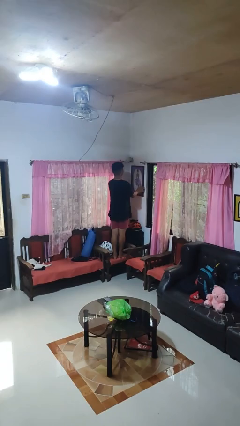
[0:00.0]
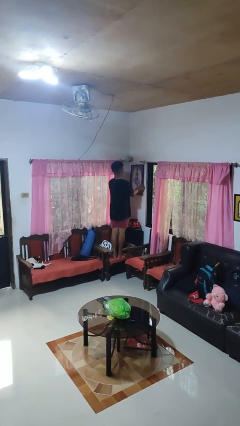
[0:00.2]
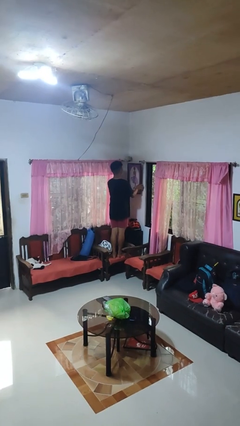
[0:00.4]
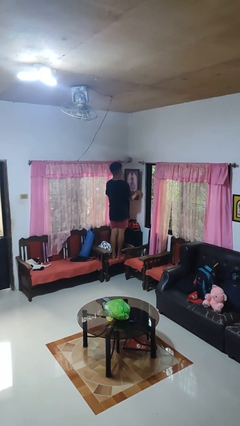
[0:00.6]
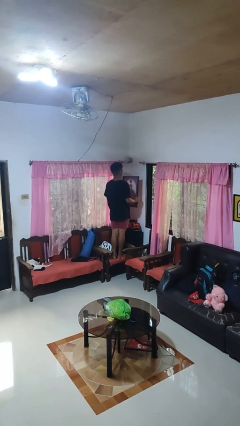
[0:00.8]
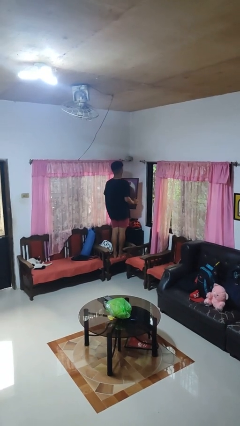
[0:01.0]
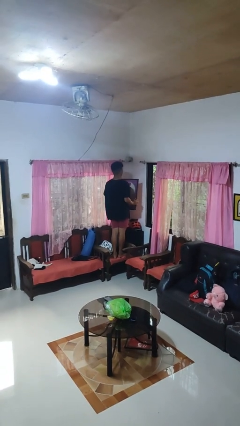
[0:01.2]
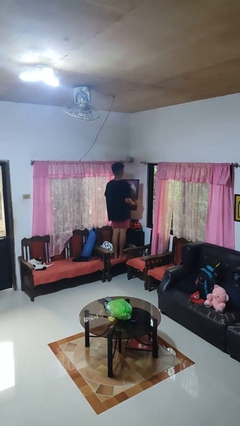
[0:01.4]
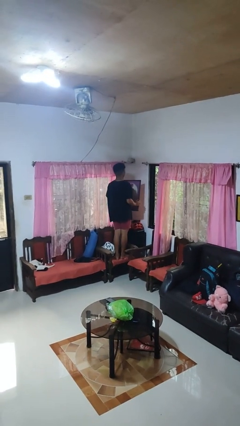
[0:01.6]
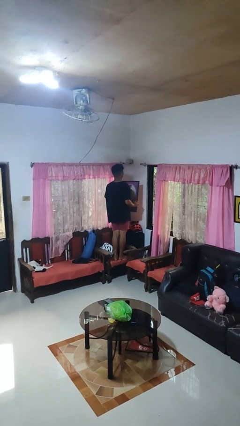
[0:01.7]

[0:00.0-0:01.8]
person takes down picture frame

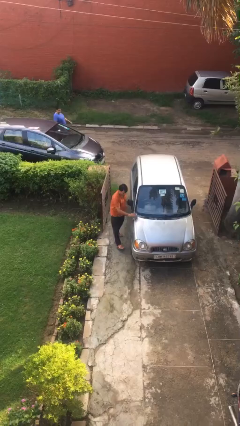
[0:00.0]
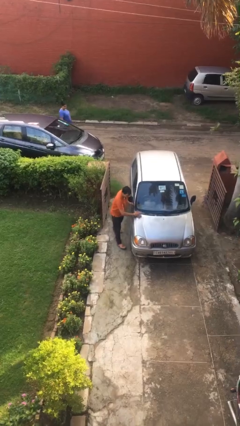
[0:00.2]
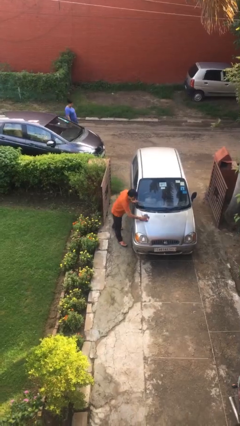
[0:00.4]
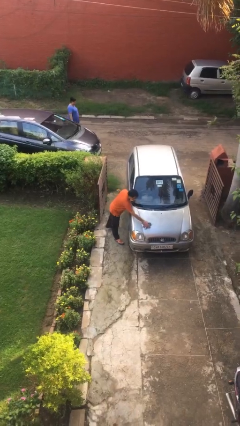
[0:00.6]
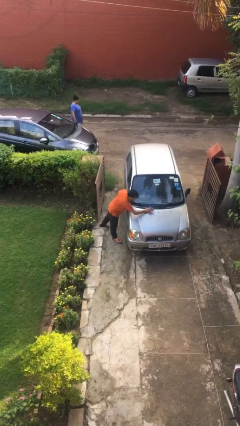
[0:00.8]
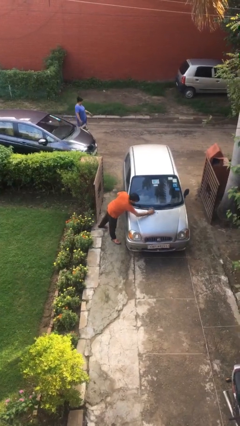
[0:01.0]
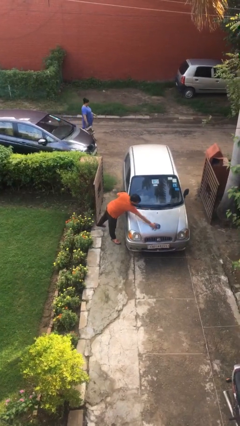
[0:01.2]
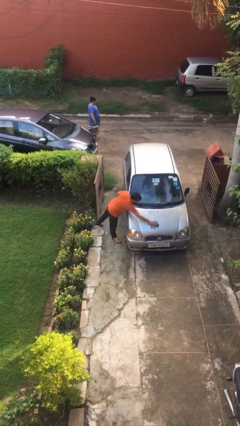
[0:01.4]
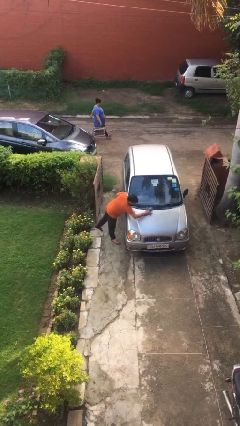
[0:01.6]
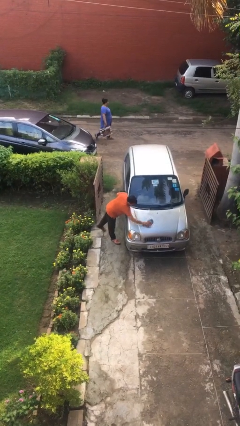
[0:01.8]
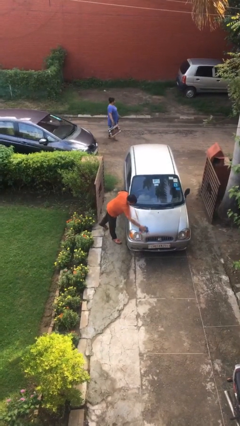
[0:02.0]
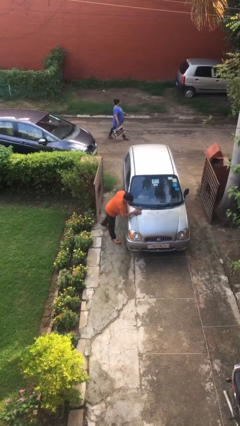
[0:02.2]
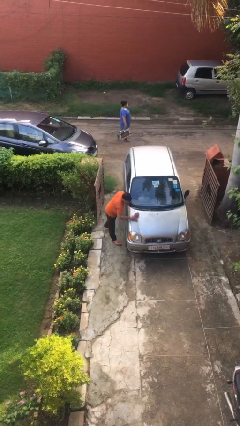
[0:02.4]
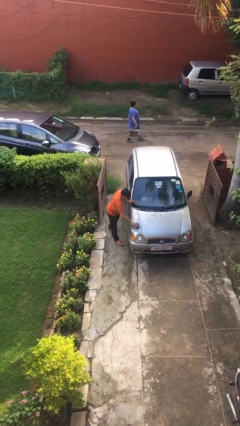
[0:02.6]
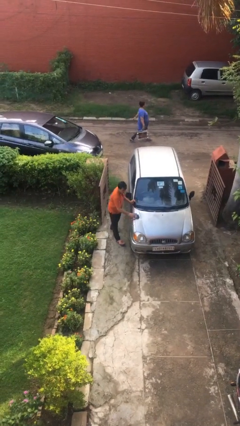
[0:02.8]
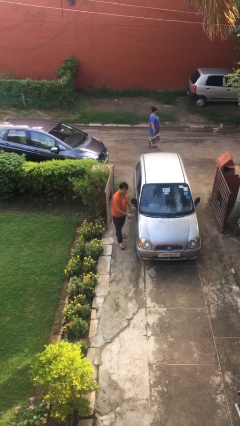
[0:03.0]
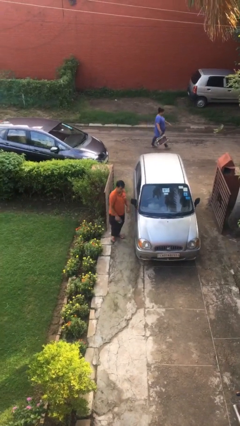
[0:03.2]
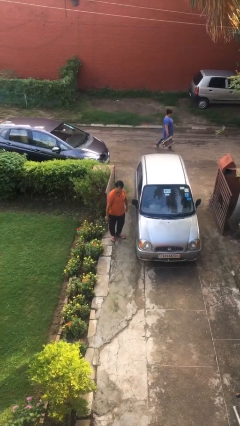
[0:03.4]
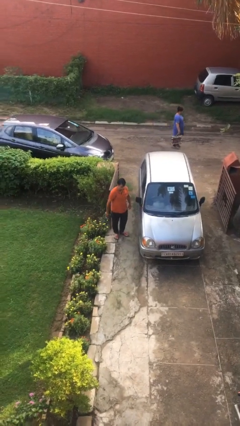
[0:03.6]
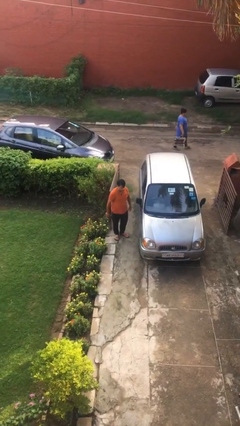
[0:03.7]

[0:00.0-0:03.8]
person polishes car with rag

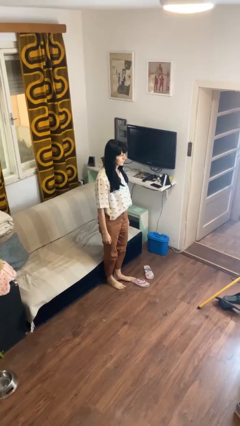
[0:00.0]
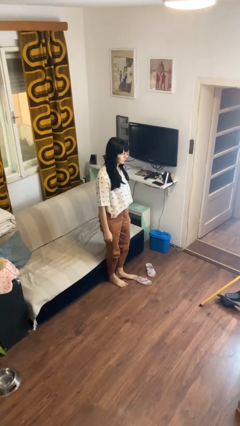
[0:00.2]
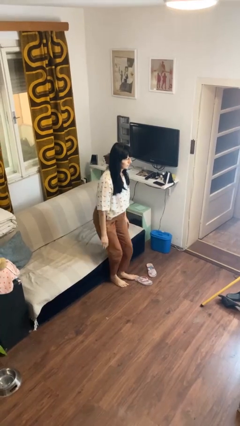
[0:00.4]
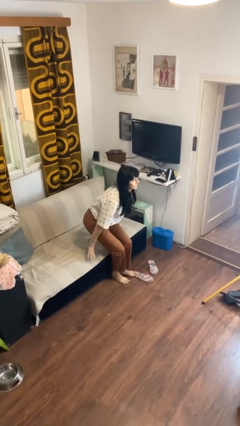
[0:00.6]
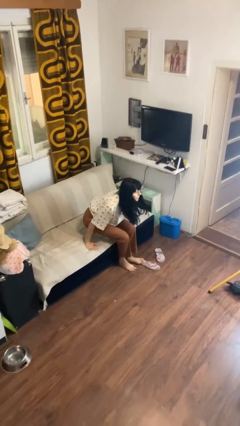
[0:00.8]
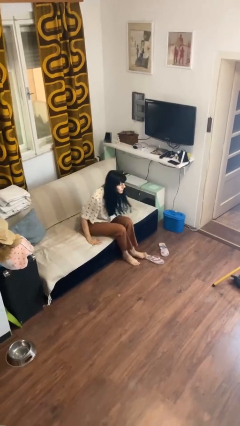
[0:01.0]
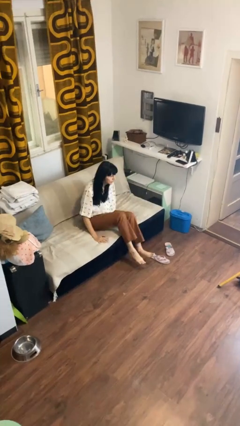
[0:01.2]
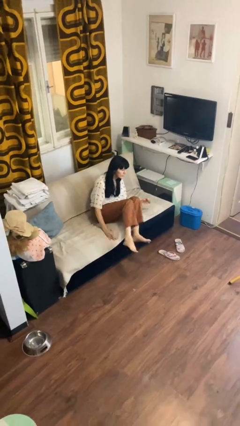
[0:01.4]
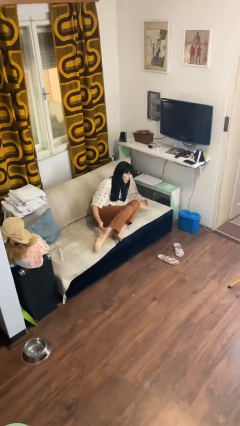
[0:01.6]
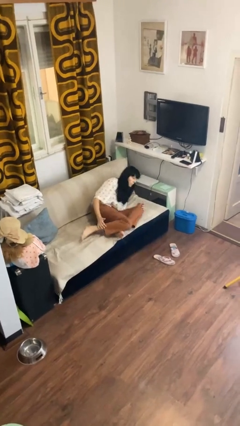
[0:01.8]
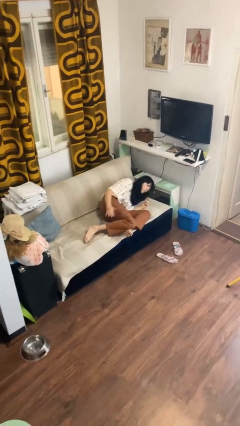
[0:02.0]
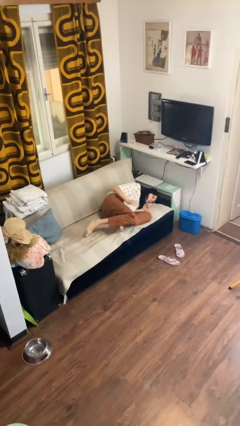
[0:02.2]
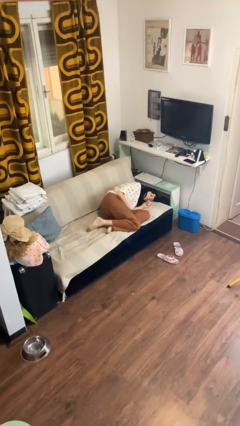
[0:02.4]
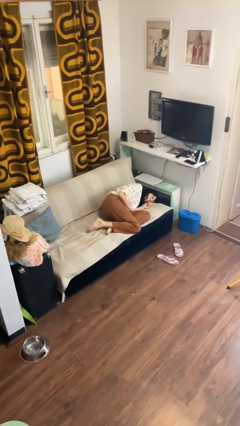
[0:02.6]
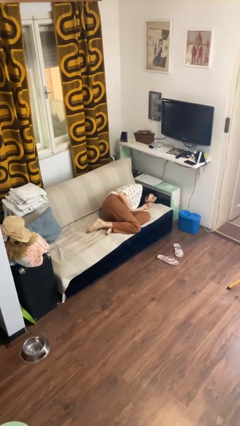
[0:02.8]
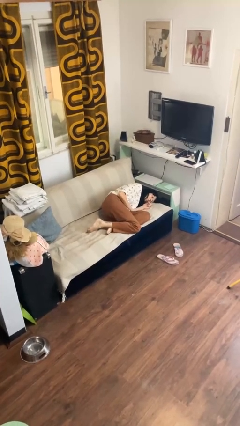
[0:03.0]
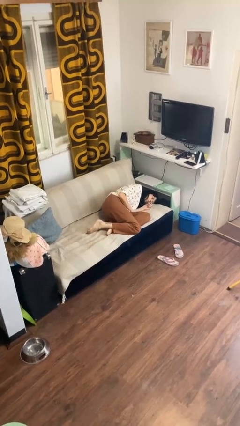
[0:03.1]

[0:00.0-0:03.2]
person lies down on couch

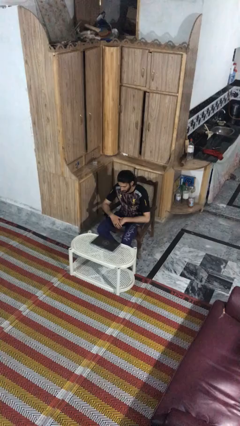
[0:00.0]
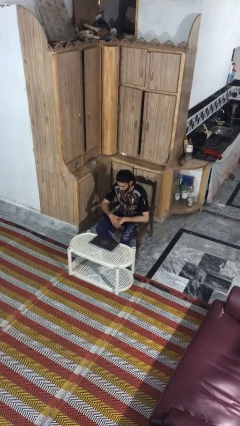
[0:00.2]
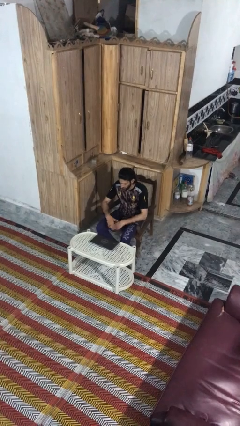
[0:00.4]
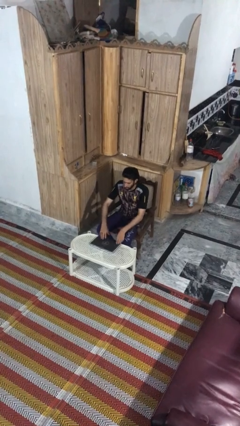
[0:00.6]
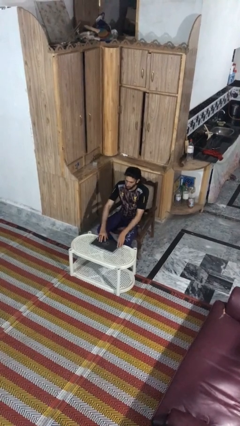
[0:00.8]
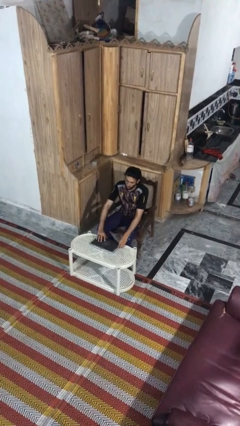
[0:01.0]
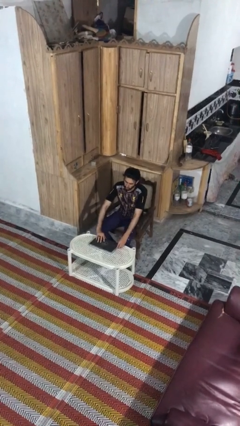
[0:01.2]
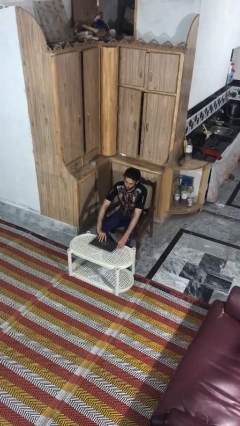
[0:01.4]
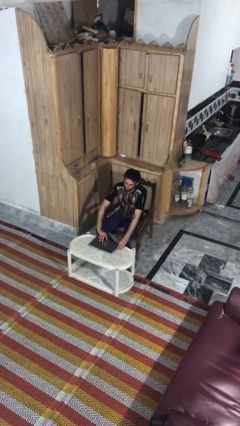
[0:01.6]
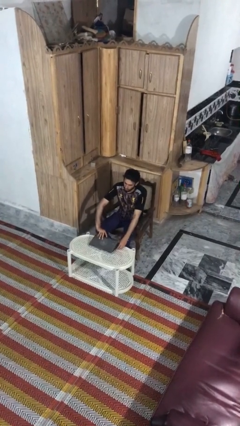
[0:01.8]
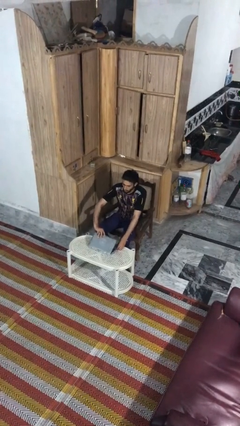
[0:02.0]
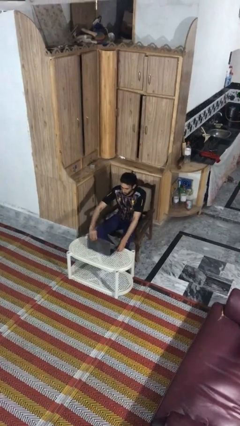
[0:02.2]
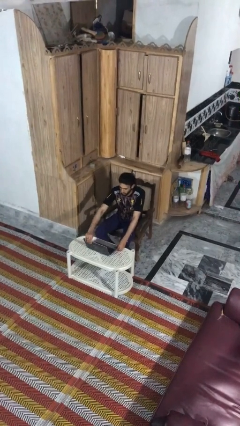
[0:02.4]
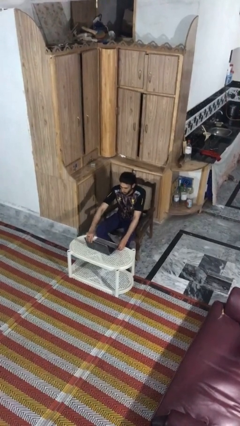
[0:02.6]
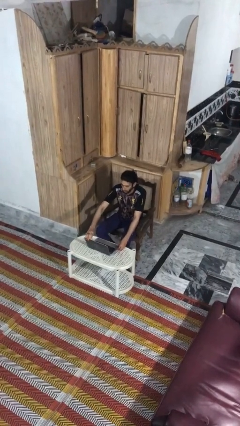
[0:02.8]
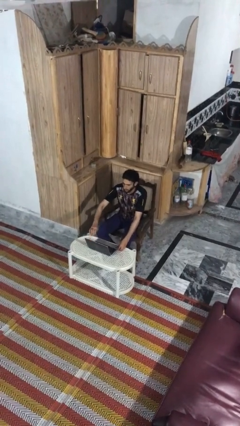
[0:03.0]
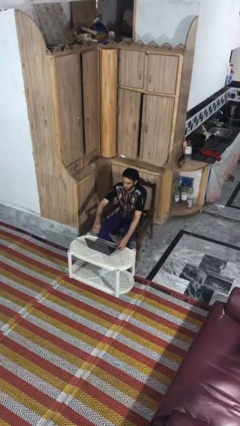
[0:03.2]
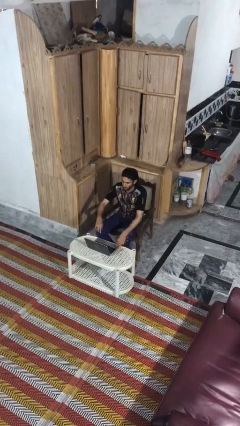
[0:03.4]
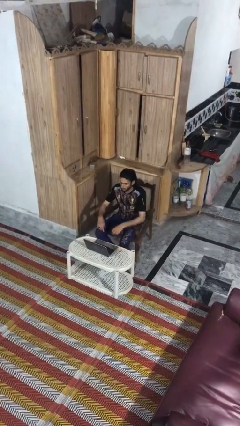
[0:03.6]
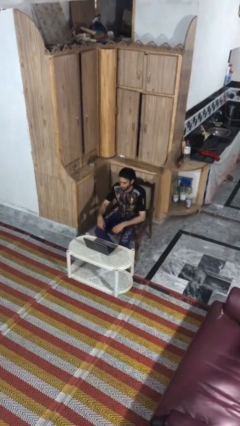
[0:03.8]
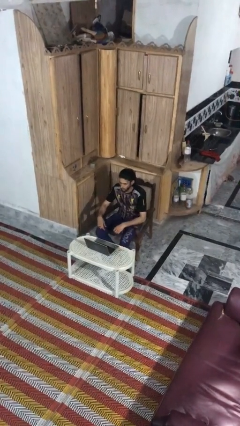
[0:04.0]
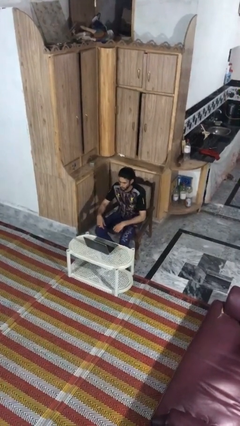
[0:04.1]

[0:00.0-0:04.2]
person opens laptop

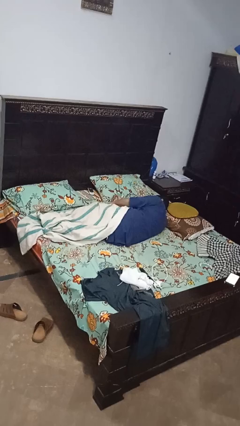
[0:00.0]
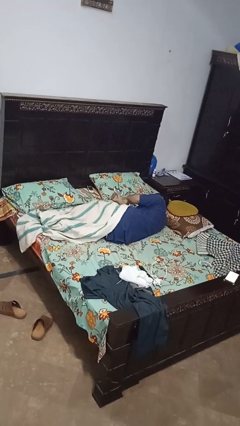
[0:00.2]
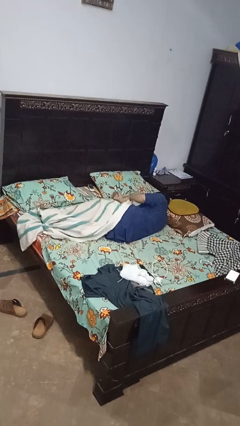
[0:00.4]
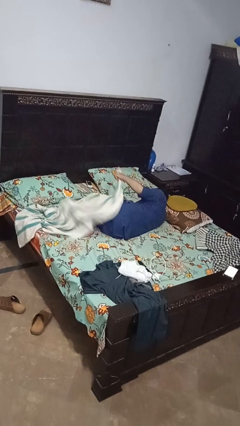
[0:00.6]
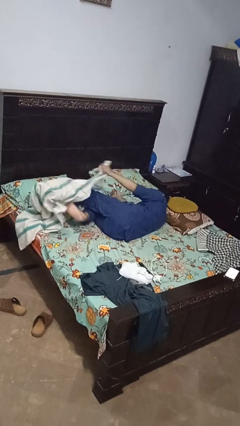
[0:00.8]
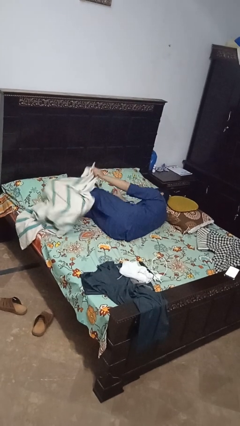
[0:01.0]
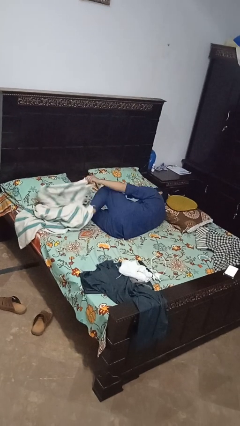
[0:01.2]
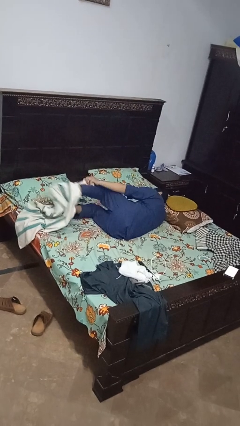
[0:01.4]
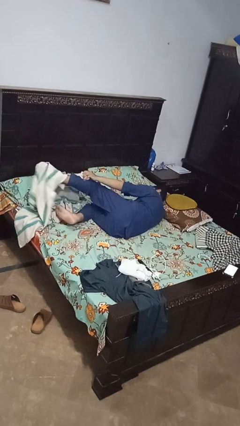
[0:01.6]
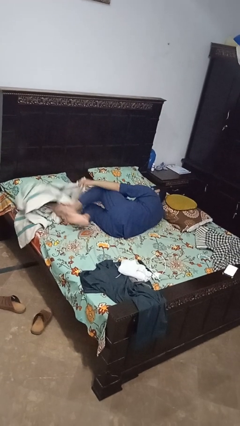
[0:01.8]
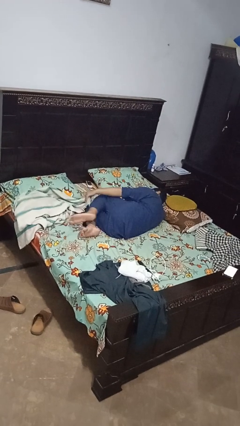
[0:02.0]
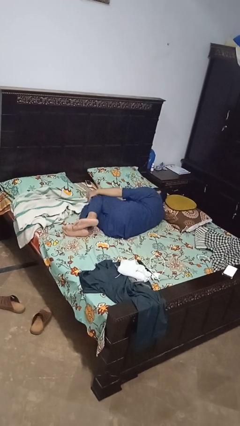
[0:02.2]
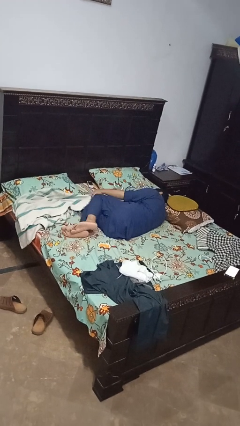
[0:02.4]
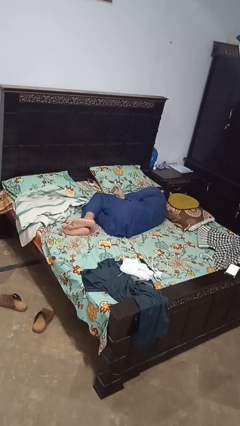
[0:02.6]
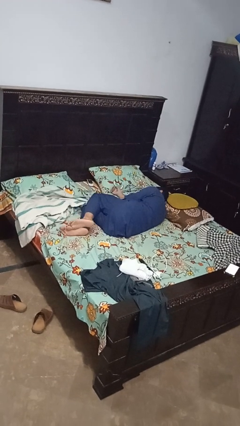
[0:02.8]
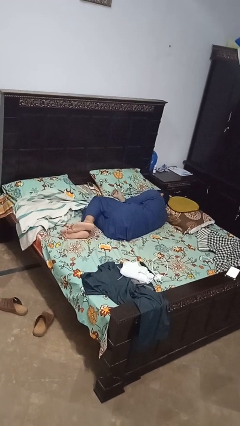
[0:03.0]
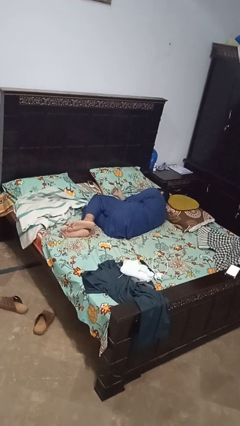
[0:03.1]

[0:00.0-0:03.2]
person uncovers with bedsheets

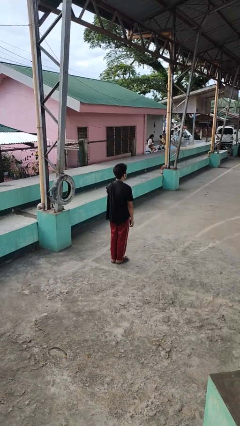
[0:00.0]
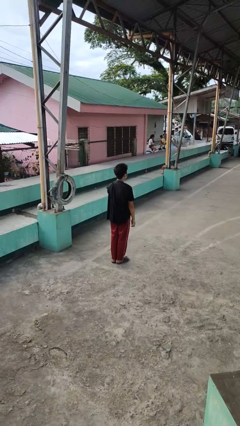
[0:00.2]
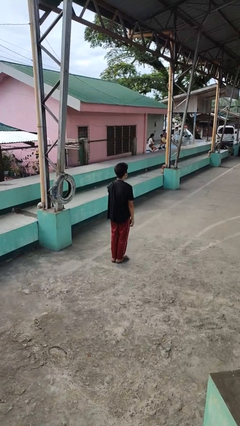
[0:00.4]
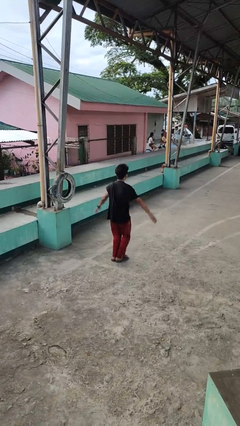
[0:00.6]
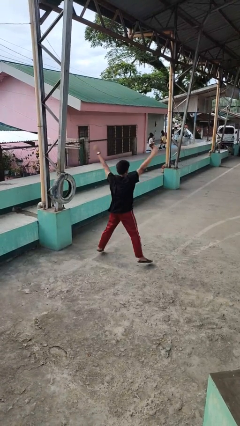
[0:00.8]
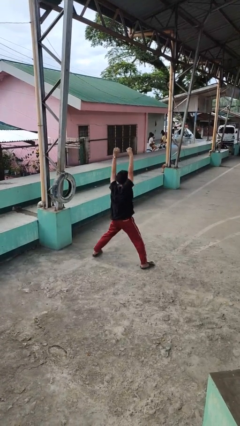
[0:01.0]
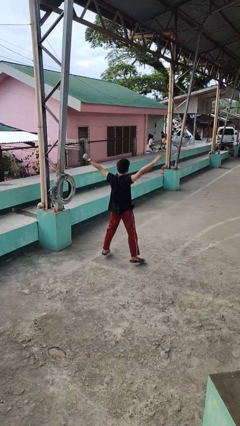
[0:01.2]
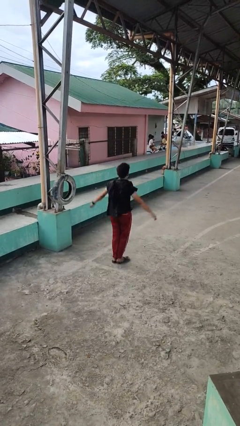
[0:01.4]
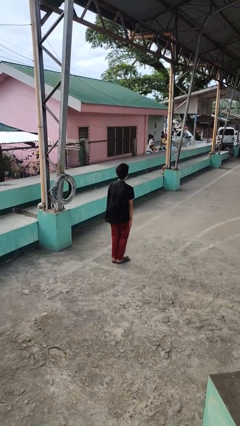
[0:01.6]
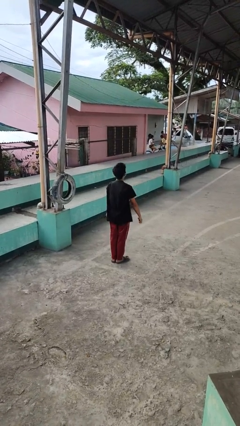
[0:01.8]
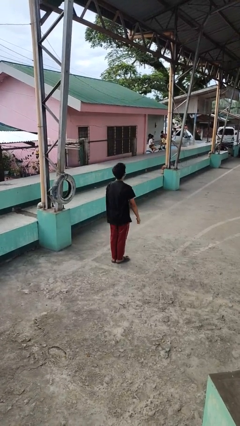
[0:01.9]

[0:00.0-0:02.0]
person exercises with jumping jacks
